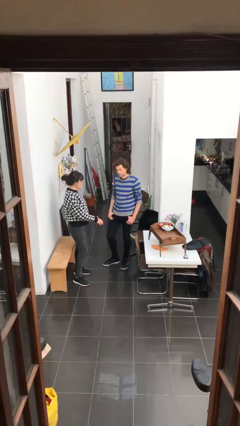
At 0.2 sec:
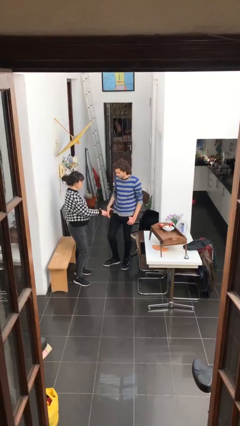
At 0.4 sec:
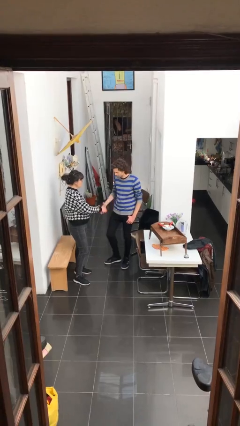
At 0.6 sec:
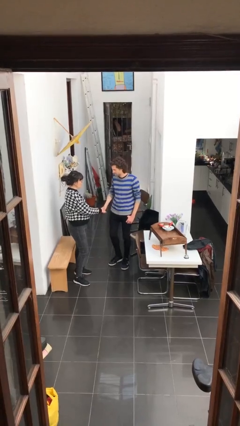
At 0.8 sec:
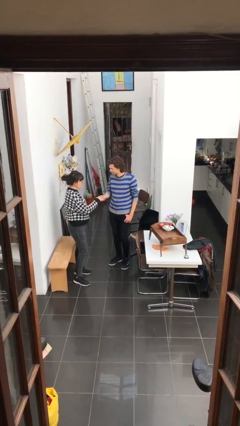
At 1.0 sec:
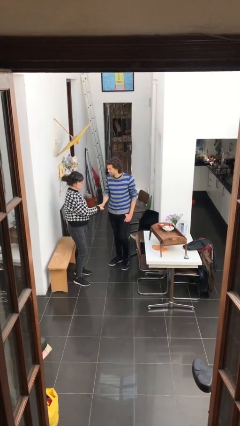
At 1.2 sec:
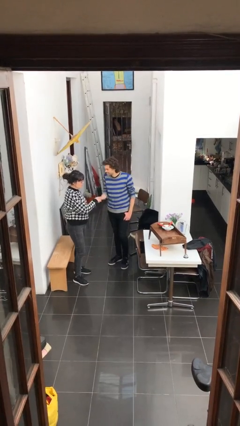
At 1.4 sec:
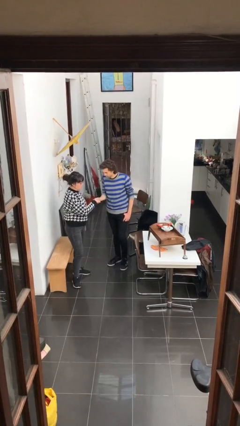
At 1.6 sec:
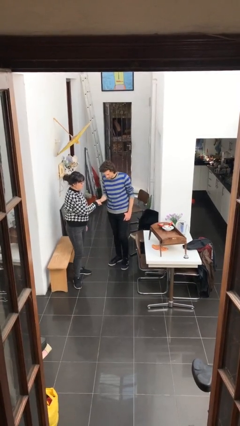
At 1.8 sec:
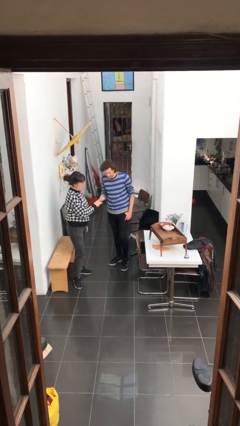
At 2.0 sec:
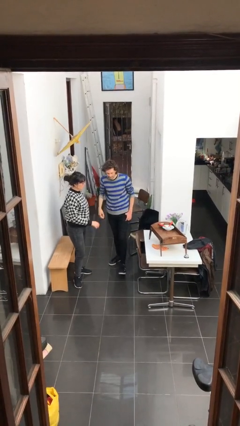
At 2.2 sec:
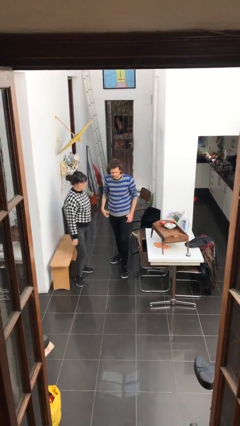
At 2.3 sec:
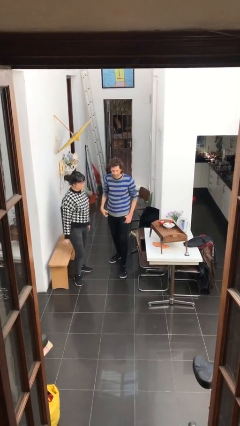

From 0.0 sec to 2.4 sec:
person shakes hand

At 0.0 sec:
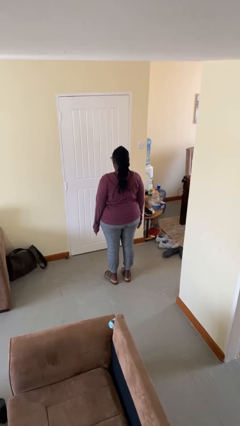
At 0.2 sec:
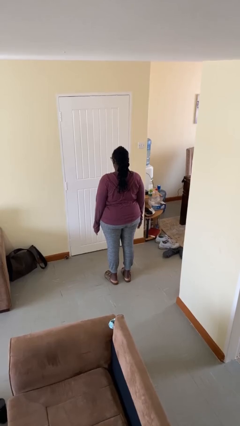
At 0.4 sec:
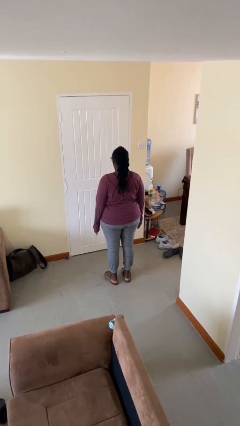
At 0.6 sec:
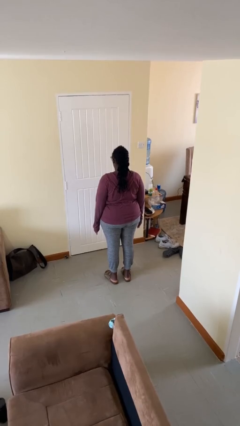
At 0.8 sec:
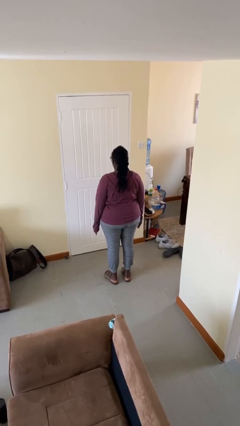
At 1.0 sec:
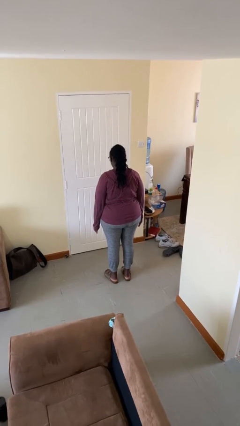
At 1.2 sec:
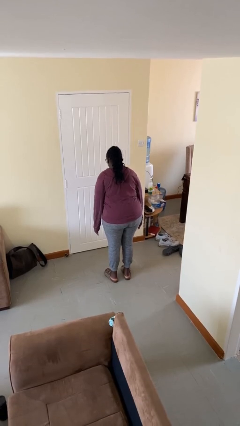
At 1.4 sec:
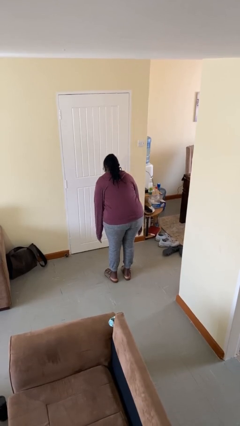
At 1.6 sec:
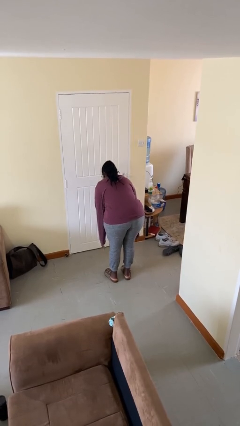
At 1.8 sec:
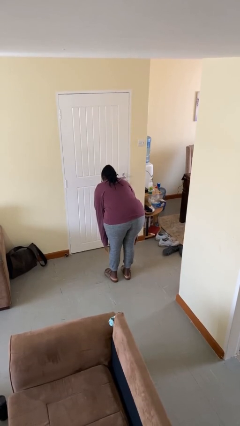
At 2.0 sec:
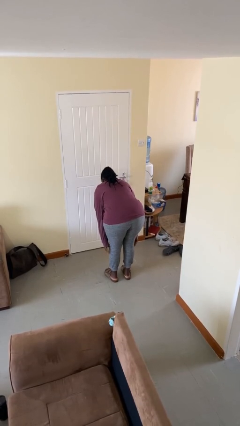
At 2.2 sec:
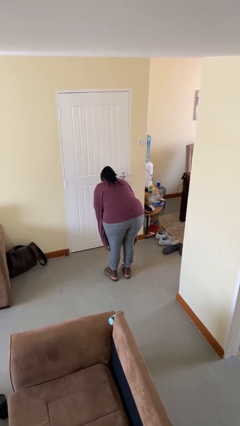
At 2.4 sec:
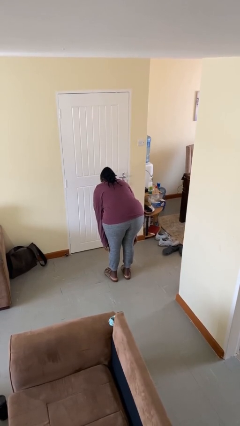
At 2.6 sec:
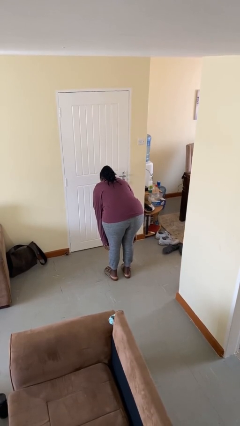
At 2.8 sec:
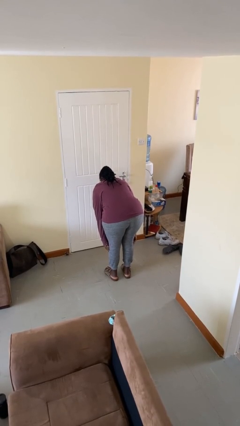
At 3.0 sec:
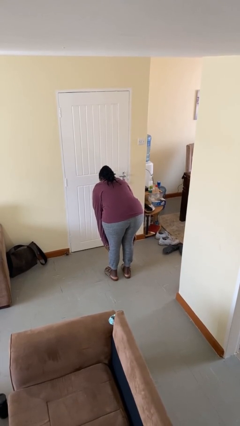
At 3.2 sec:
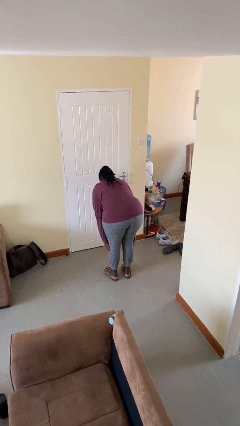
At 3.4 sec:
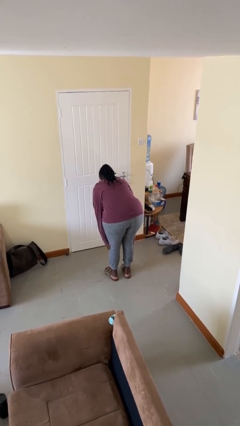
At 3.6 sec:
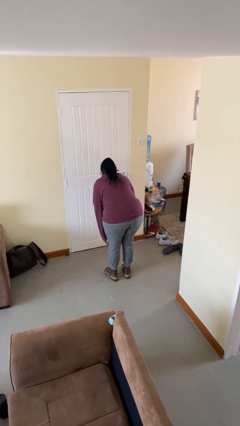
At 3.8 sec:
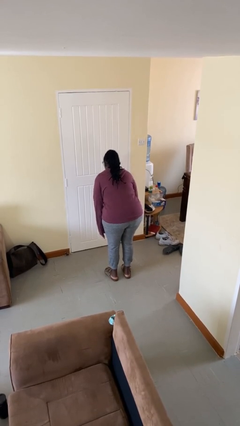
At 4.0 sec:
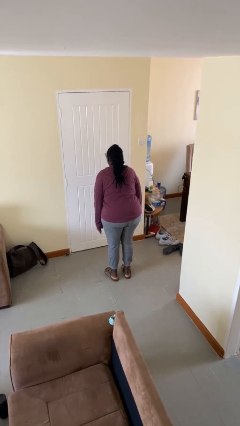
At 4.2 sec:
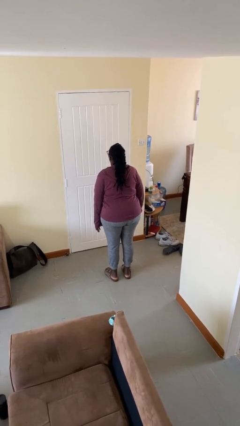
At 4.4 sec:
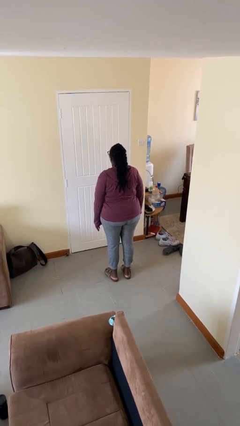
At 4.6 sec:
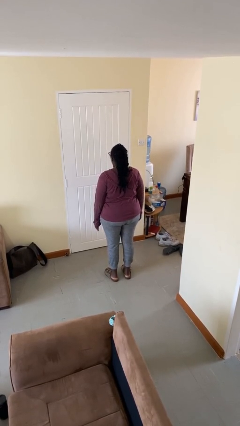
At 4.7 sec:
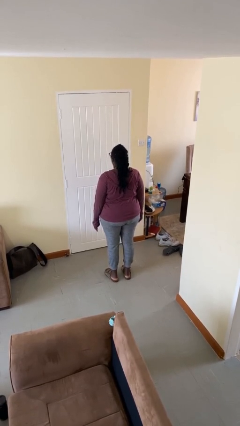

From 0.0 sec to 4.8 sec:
person bows

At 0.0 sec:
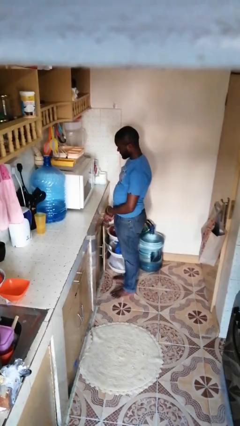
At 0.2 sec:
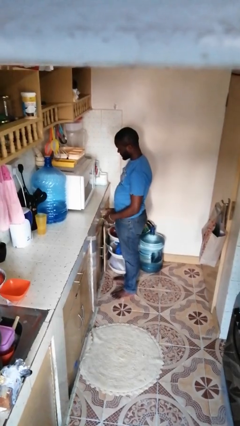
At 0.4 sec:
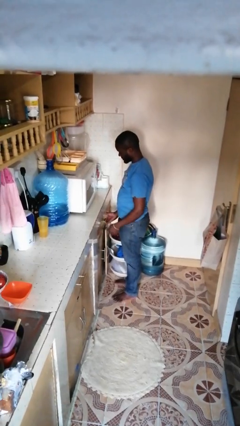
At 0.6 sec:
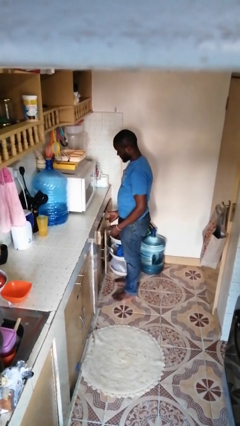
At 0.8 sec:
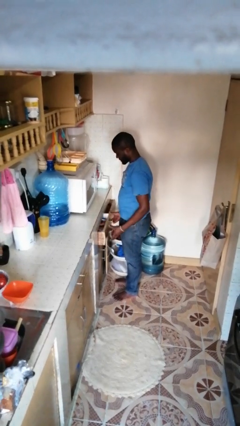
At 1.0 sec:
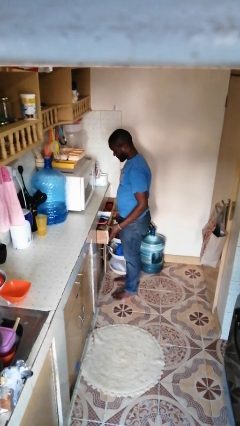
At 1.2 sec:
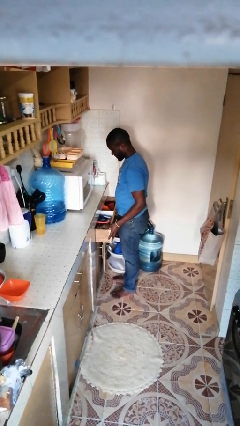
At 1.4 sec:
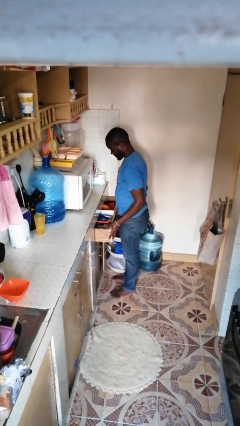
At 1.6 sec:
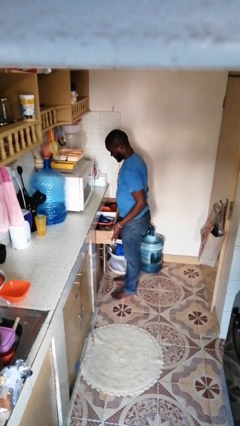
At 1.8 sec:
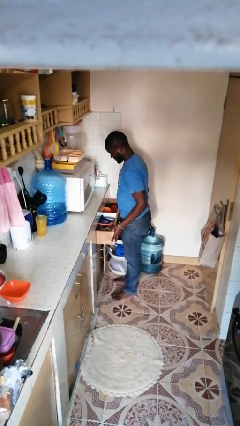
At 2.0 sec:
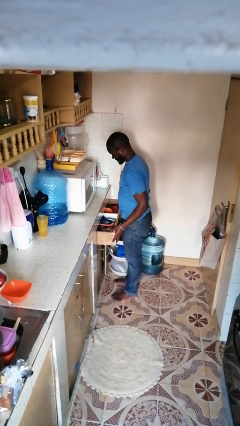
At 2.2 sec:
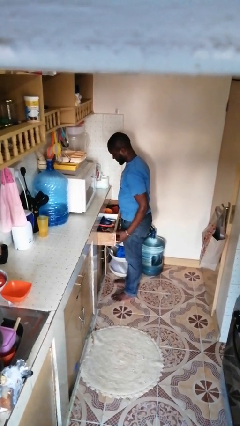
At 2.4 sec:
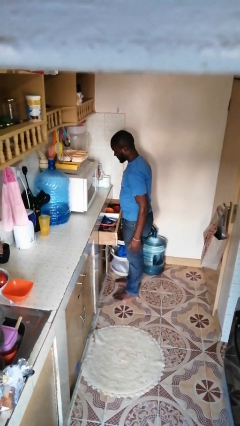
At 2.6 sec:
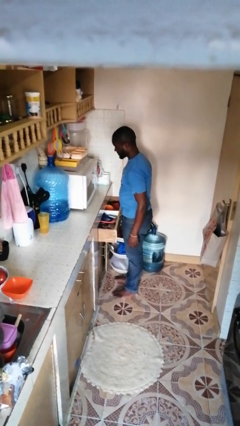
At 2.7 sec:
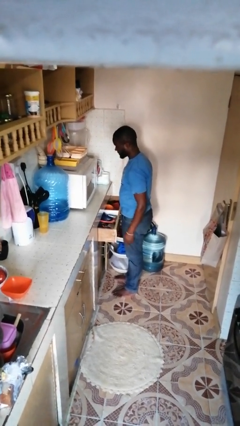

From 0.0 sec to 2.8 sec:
person opens kitchen drawer

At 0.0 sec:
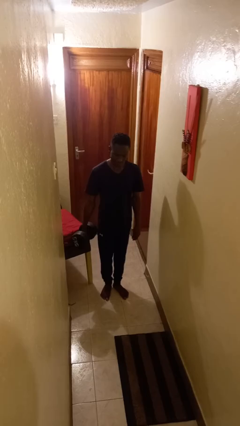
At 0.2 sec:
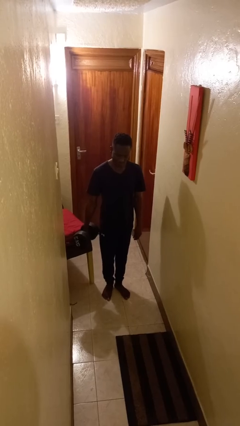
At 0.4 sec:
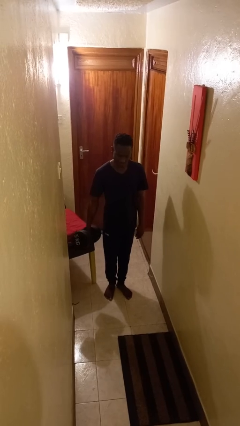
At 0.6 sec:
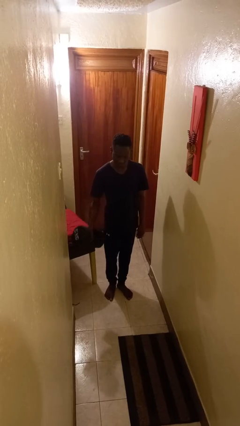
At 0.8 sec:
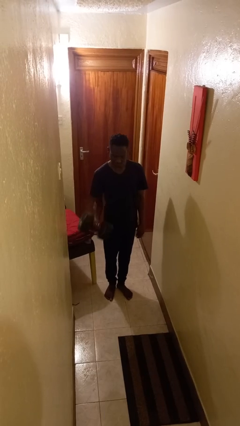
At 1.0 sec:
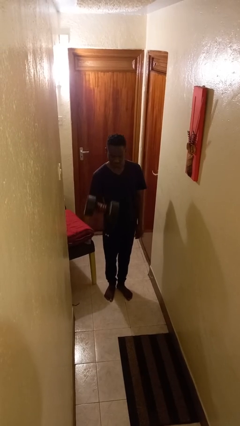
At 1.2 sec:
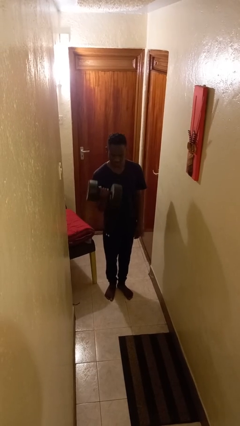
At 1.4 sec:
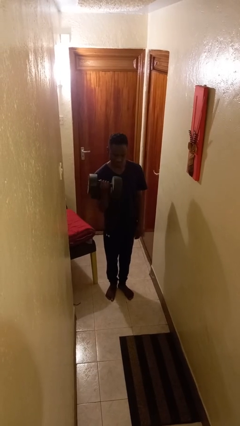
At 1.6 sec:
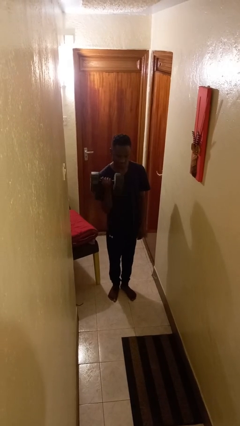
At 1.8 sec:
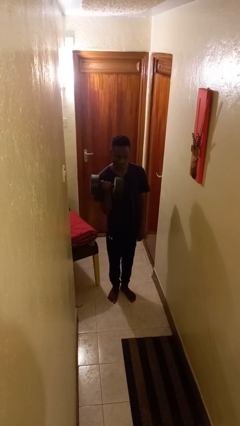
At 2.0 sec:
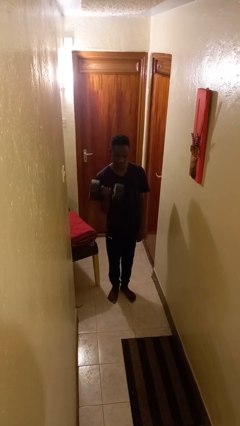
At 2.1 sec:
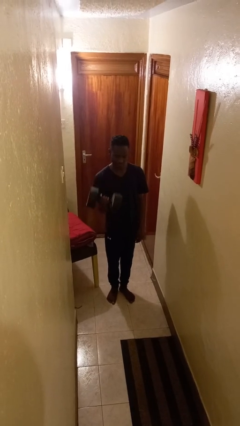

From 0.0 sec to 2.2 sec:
person lifts dumbbells

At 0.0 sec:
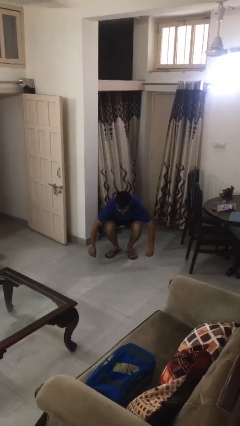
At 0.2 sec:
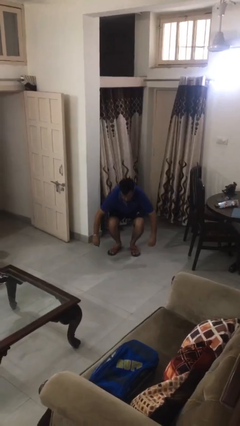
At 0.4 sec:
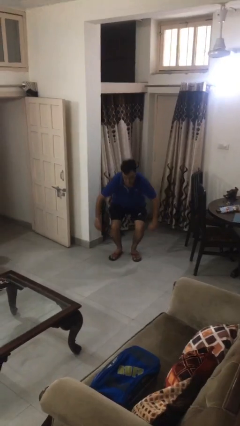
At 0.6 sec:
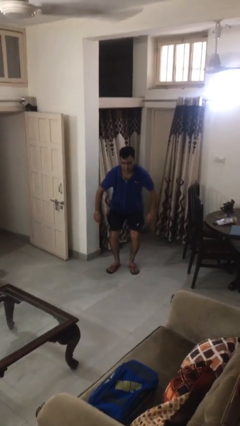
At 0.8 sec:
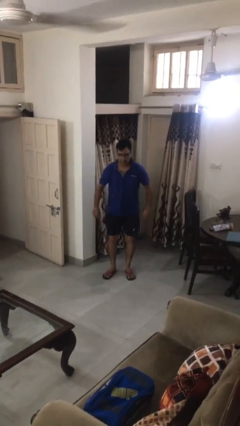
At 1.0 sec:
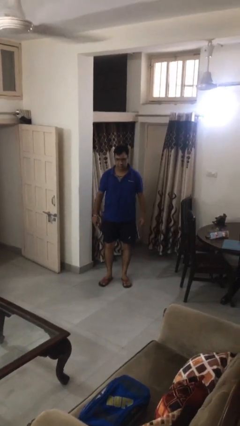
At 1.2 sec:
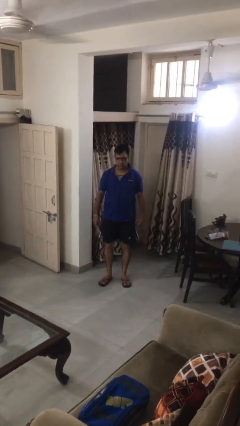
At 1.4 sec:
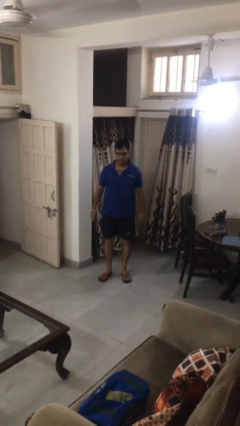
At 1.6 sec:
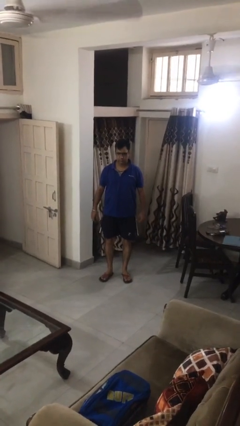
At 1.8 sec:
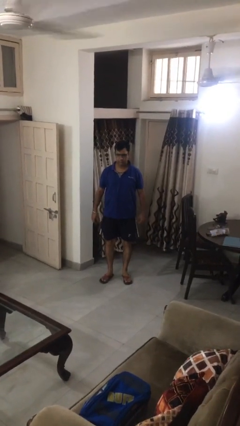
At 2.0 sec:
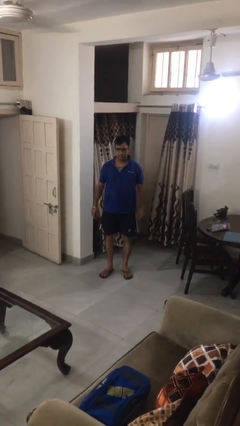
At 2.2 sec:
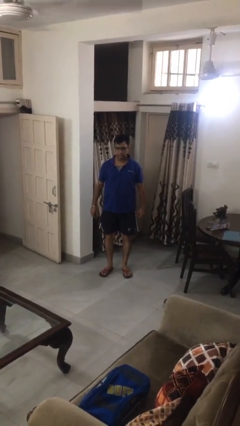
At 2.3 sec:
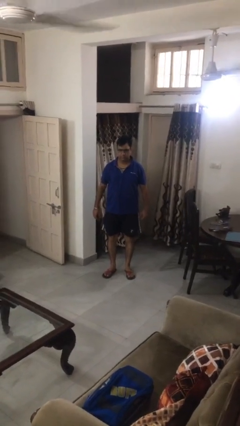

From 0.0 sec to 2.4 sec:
person stands up

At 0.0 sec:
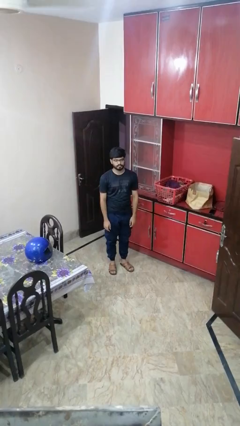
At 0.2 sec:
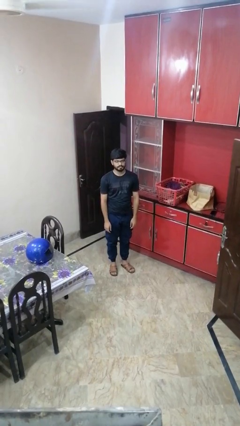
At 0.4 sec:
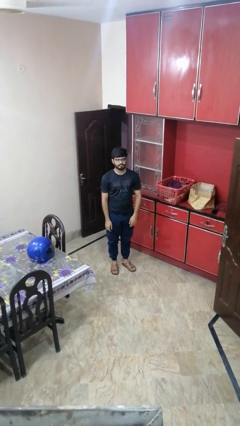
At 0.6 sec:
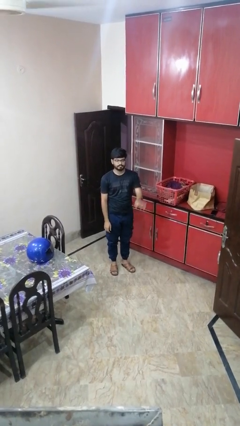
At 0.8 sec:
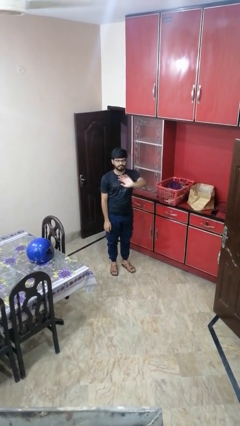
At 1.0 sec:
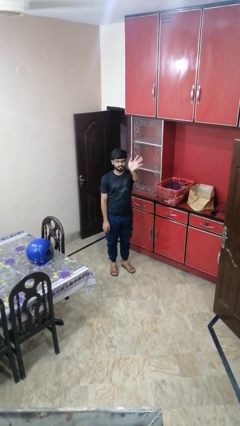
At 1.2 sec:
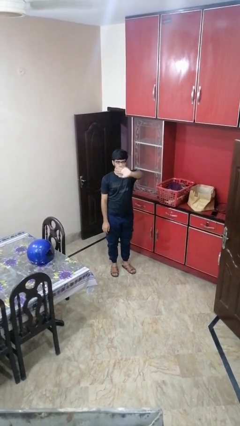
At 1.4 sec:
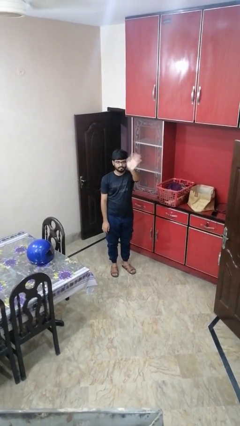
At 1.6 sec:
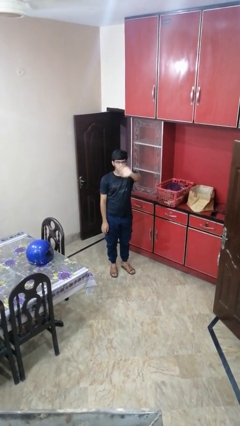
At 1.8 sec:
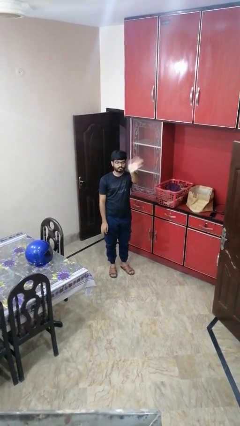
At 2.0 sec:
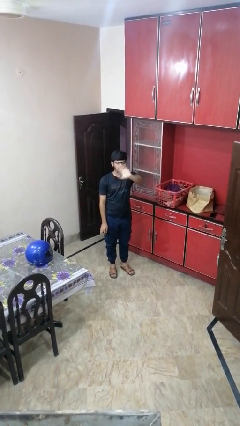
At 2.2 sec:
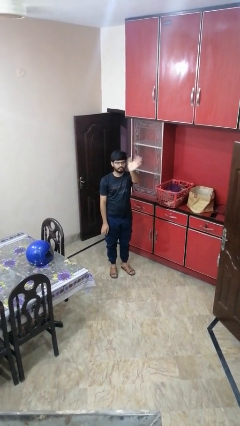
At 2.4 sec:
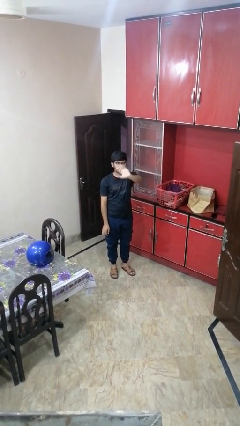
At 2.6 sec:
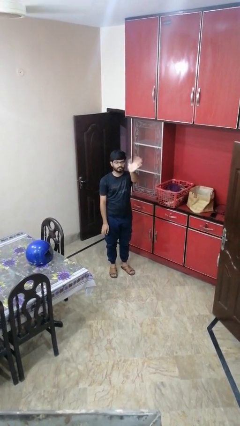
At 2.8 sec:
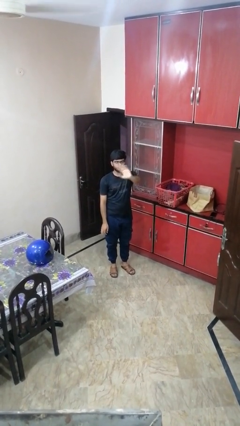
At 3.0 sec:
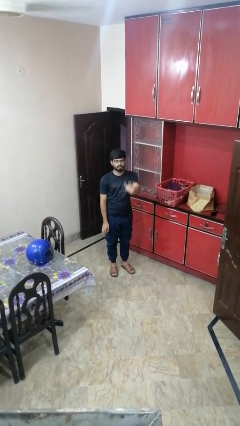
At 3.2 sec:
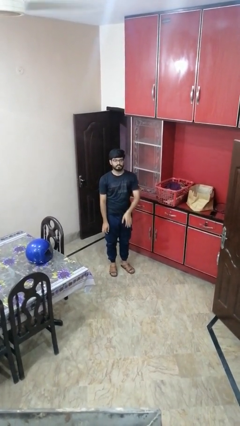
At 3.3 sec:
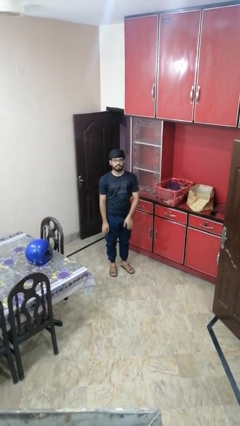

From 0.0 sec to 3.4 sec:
person waves at person
